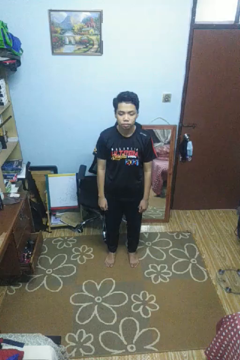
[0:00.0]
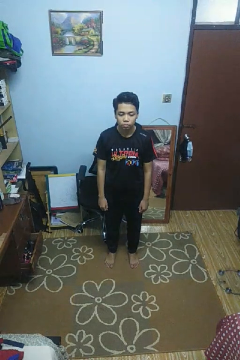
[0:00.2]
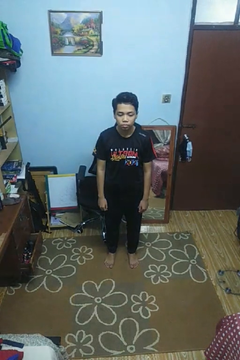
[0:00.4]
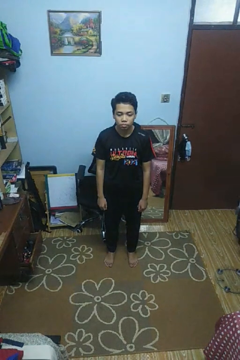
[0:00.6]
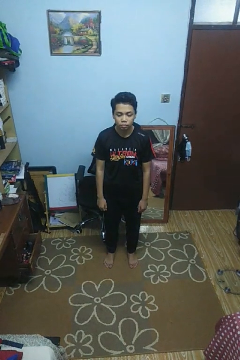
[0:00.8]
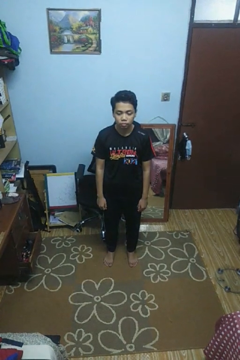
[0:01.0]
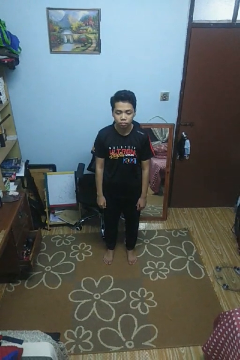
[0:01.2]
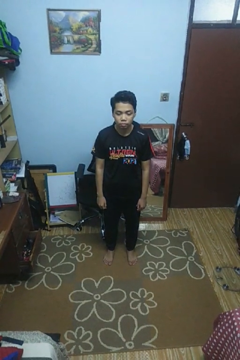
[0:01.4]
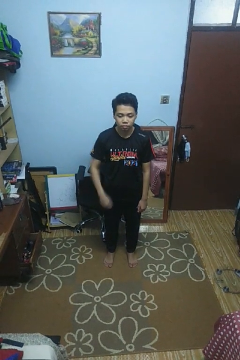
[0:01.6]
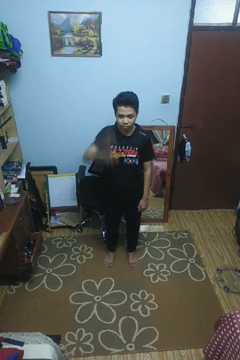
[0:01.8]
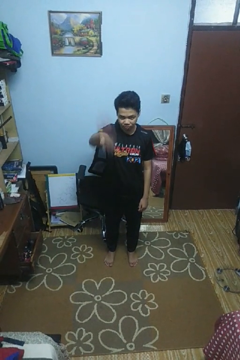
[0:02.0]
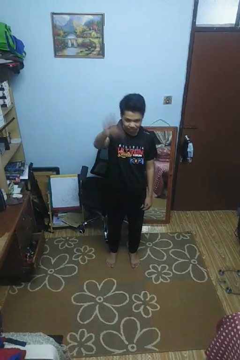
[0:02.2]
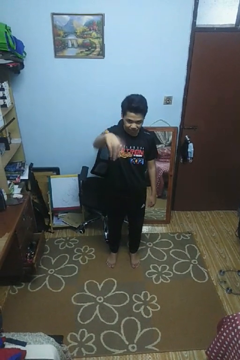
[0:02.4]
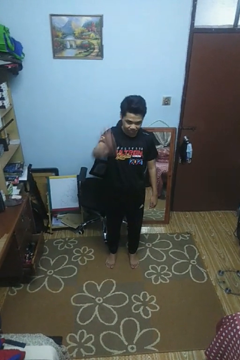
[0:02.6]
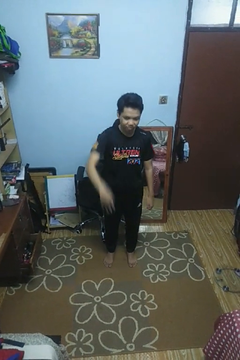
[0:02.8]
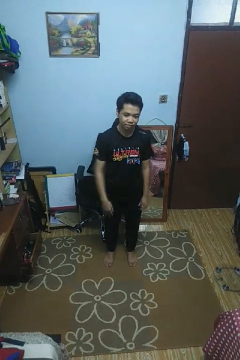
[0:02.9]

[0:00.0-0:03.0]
person gestures come here

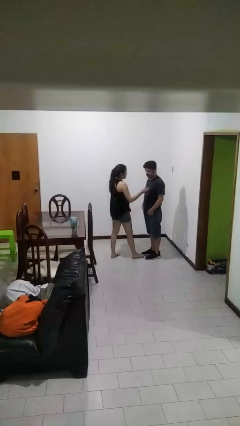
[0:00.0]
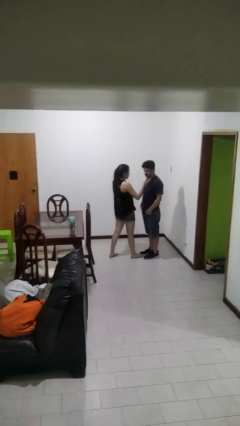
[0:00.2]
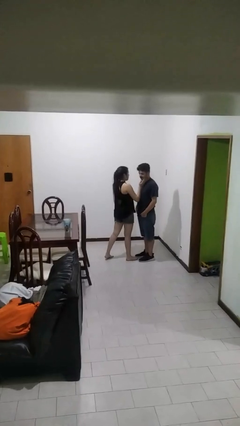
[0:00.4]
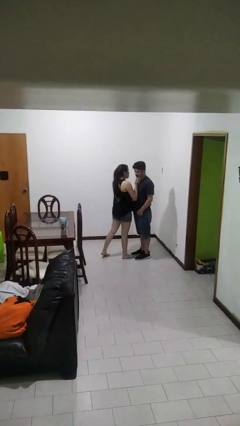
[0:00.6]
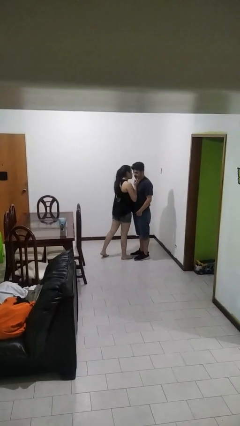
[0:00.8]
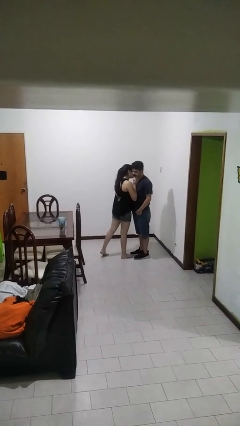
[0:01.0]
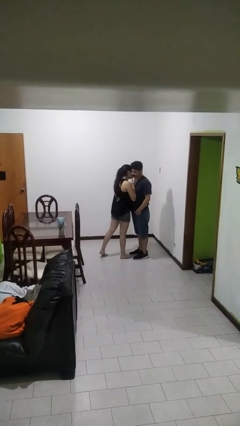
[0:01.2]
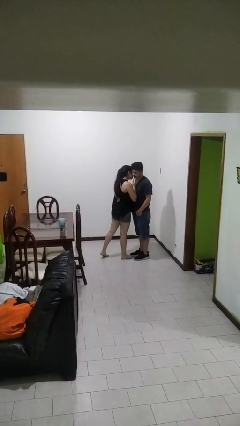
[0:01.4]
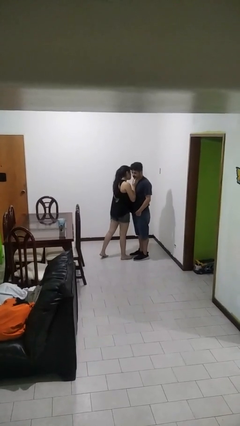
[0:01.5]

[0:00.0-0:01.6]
person kisses cheek of person

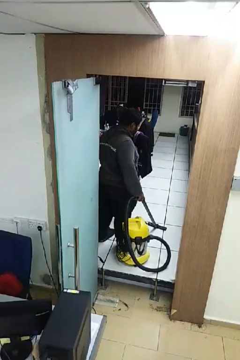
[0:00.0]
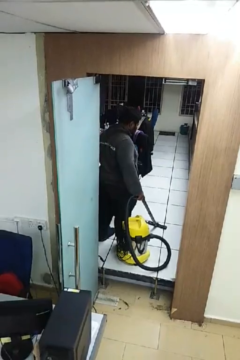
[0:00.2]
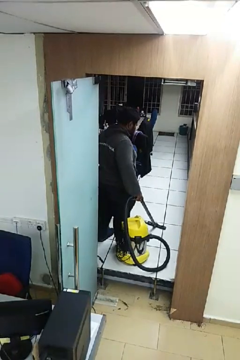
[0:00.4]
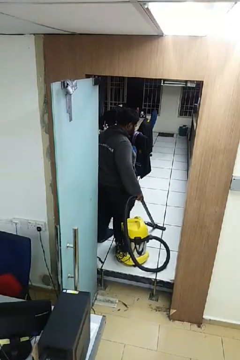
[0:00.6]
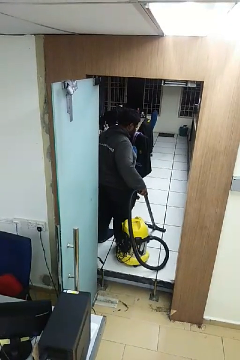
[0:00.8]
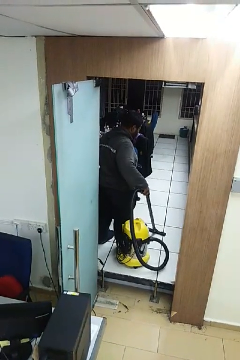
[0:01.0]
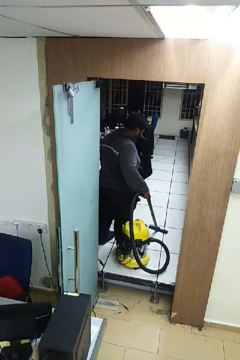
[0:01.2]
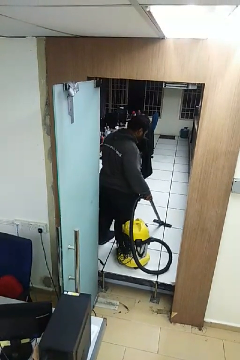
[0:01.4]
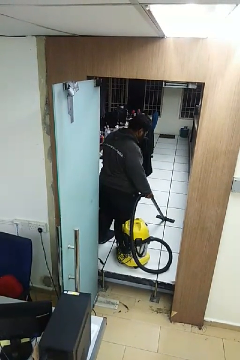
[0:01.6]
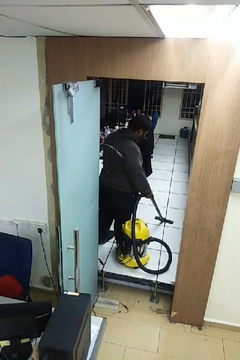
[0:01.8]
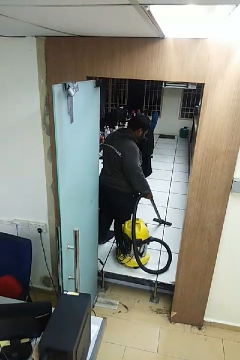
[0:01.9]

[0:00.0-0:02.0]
person vacuums carpet

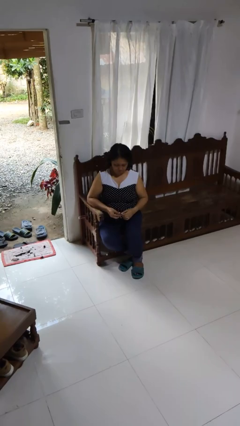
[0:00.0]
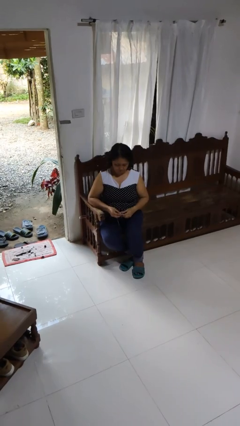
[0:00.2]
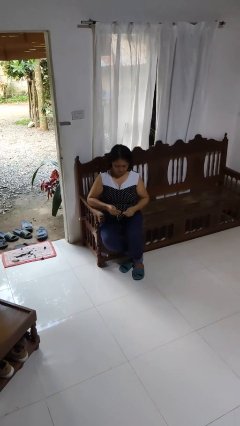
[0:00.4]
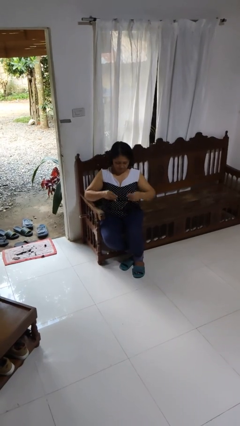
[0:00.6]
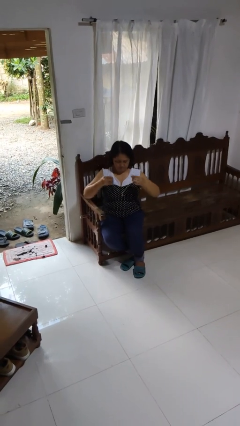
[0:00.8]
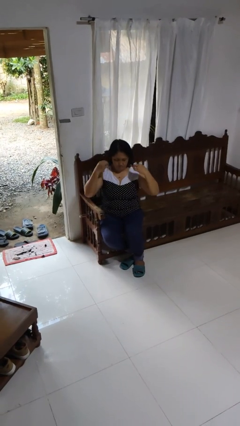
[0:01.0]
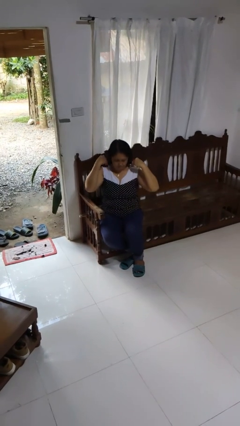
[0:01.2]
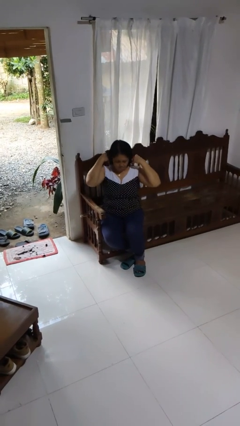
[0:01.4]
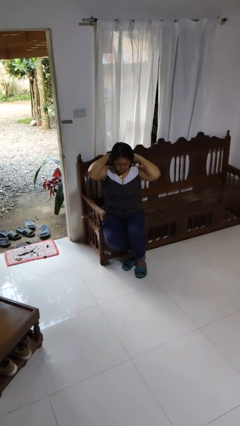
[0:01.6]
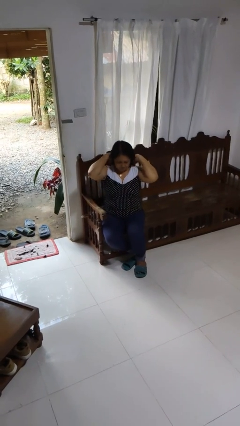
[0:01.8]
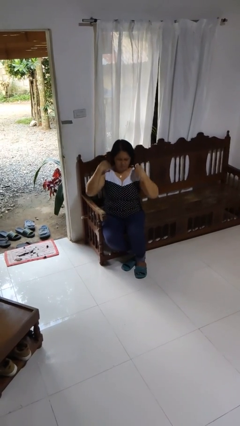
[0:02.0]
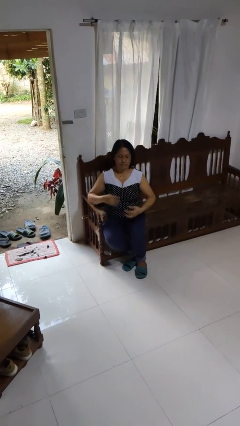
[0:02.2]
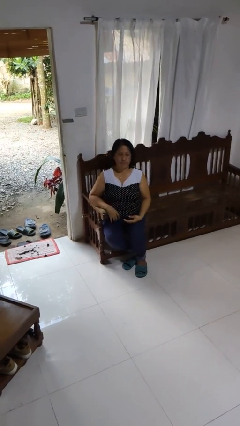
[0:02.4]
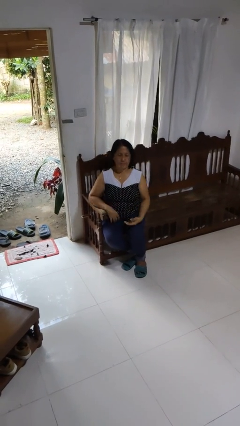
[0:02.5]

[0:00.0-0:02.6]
person puts on necklace

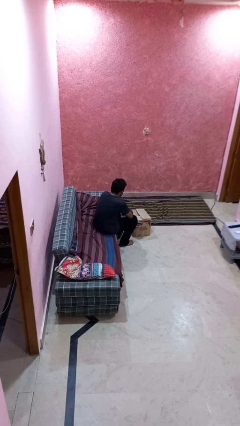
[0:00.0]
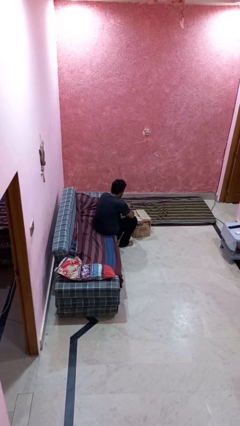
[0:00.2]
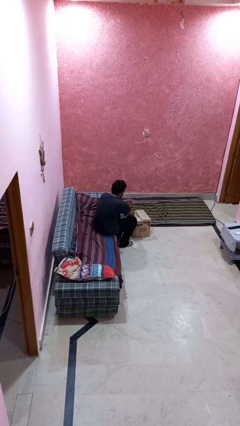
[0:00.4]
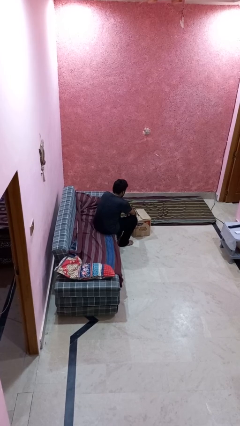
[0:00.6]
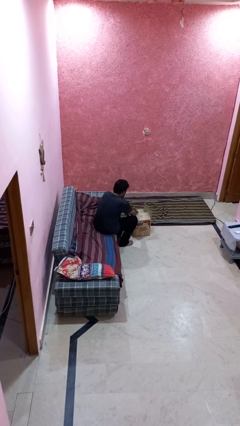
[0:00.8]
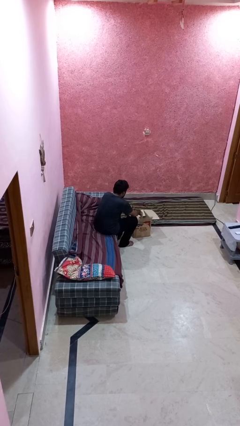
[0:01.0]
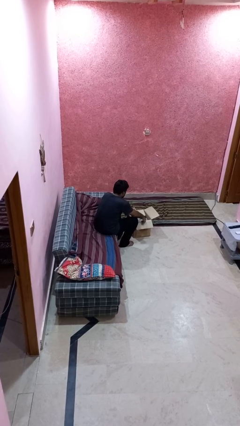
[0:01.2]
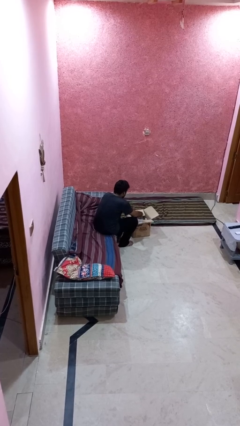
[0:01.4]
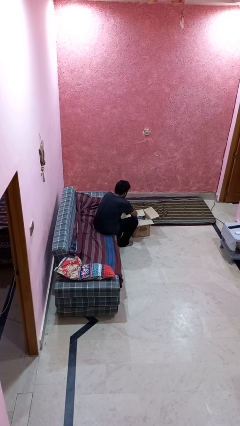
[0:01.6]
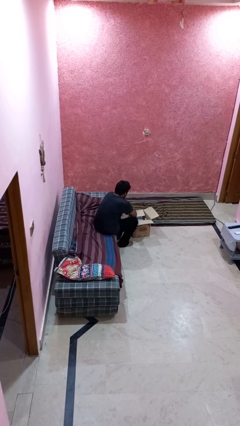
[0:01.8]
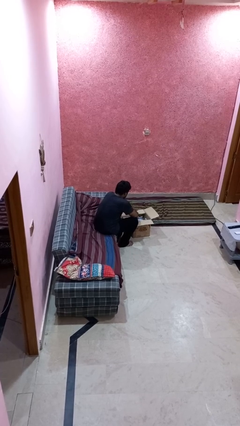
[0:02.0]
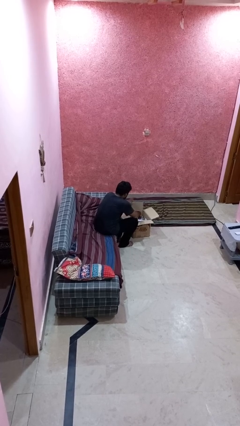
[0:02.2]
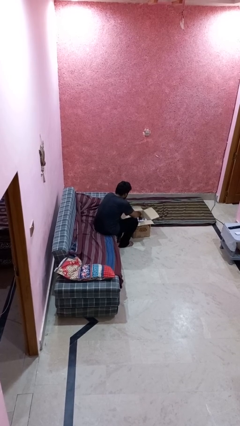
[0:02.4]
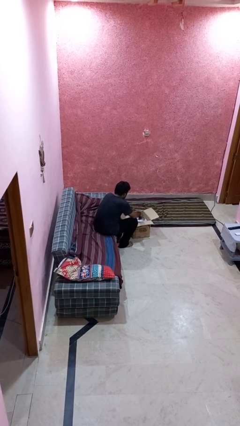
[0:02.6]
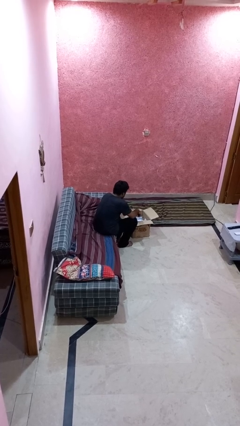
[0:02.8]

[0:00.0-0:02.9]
person opens box

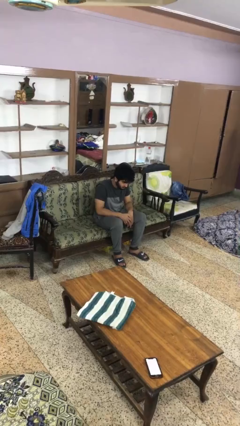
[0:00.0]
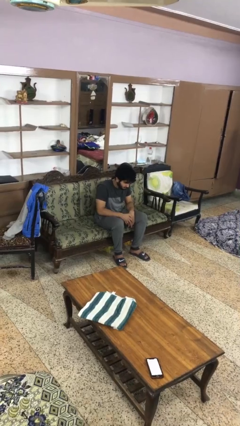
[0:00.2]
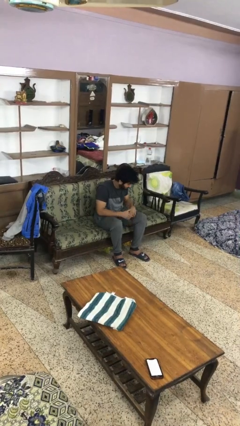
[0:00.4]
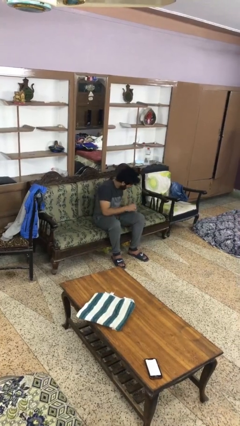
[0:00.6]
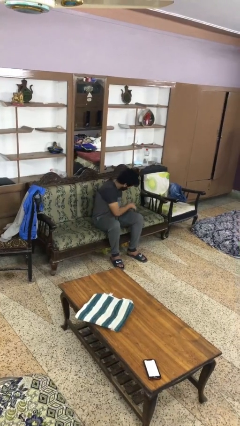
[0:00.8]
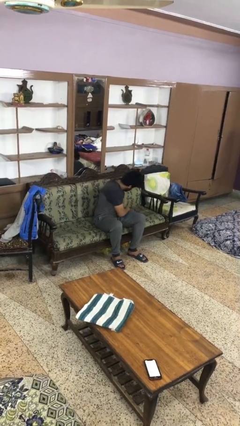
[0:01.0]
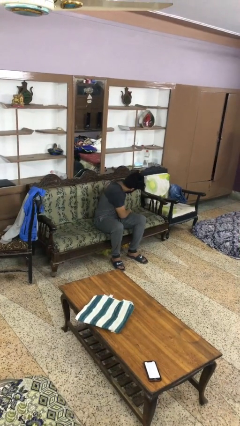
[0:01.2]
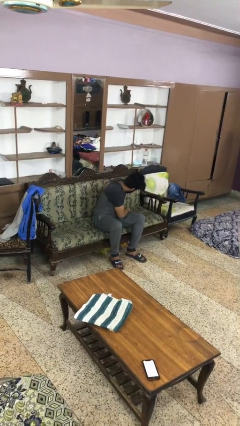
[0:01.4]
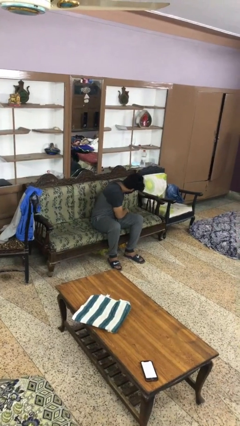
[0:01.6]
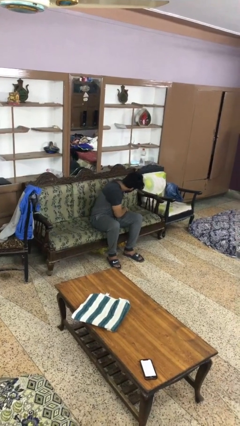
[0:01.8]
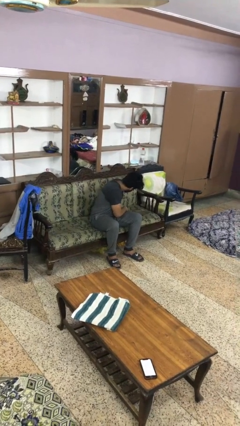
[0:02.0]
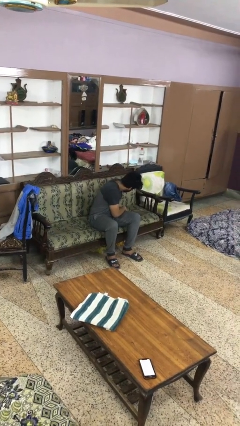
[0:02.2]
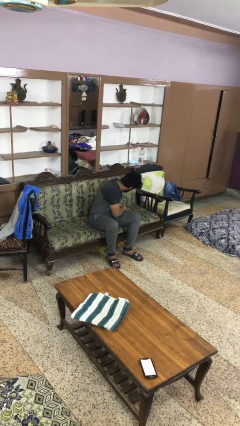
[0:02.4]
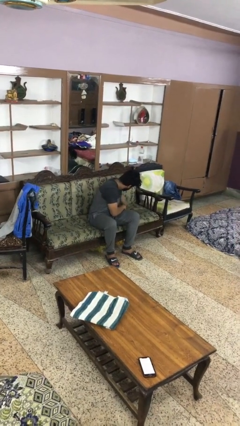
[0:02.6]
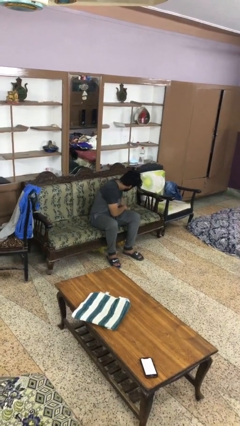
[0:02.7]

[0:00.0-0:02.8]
person searches in couch

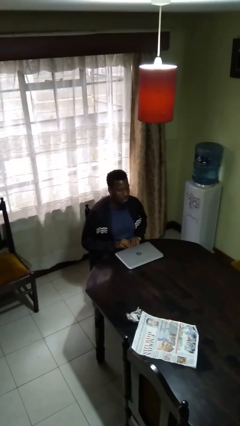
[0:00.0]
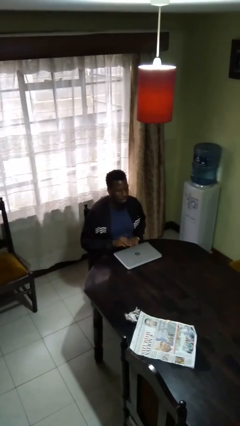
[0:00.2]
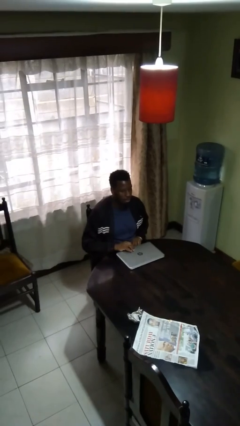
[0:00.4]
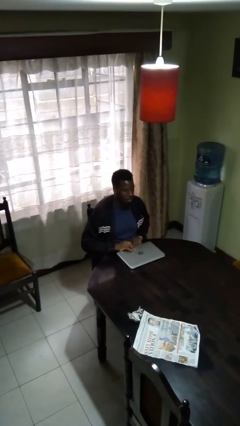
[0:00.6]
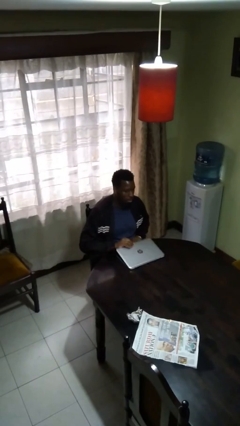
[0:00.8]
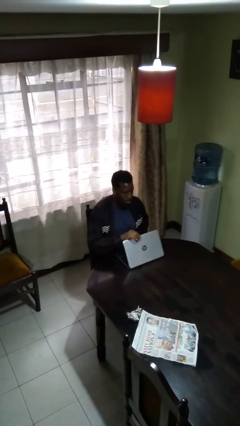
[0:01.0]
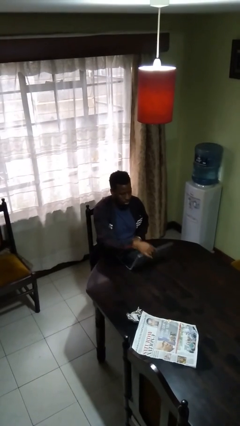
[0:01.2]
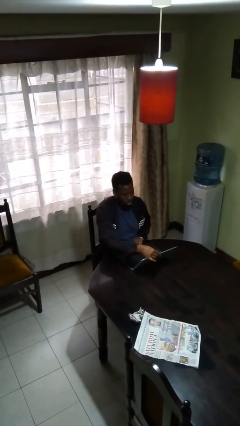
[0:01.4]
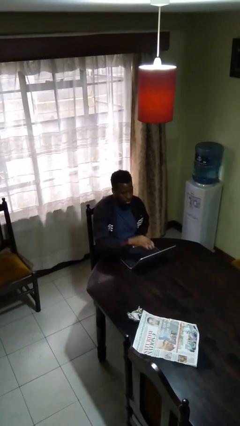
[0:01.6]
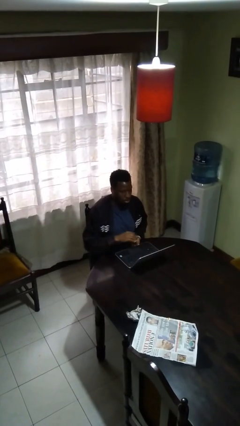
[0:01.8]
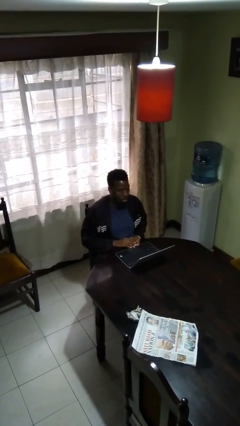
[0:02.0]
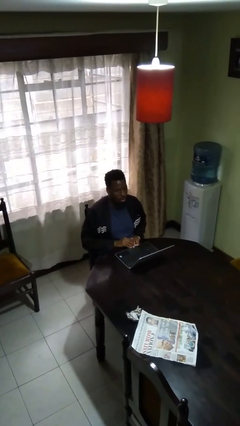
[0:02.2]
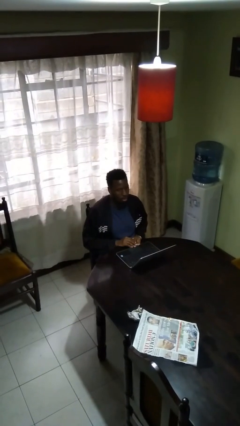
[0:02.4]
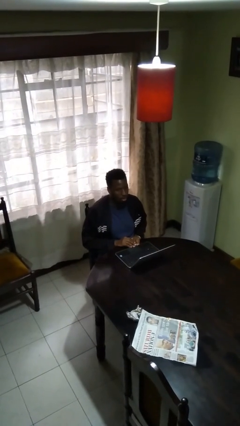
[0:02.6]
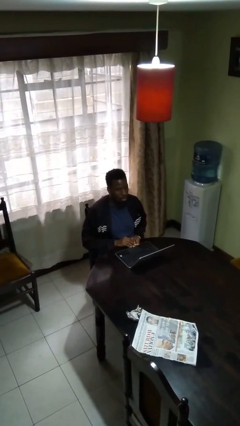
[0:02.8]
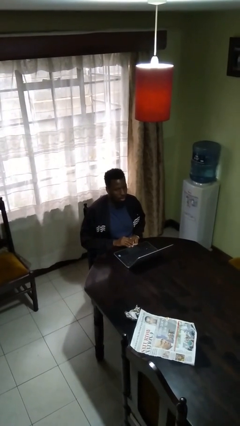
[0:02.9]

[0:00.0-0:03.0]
person opens laptop

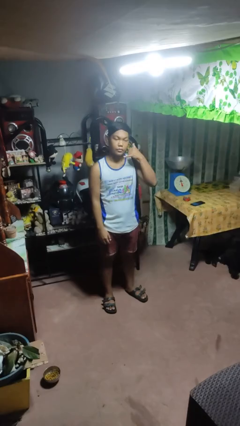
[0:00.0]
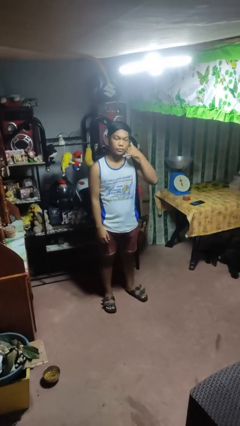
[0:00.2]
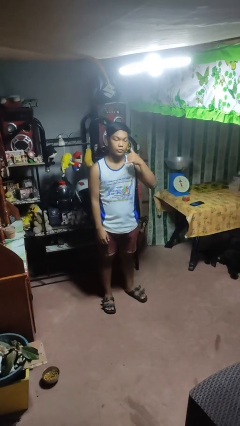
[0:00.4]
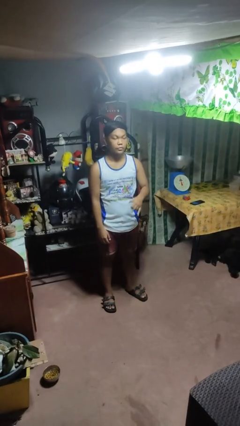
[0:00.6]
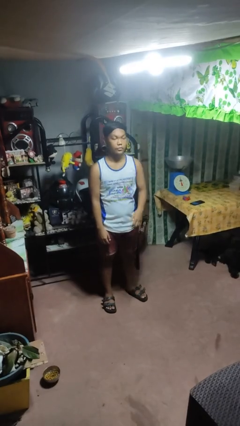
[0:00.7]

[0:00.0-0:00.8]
person gestures call me
